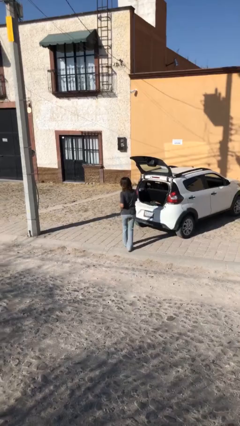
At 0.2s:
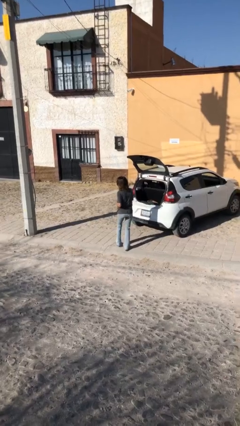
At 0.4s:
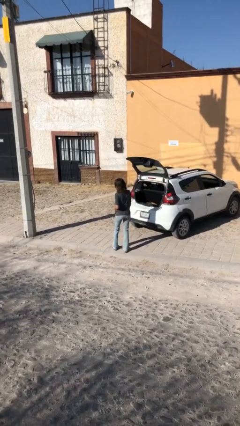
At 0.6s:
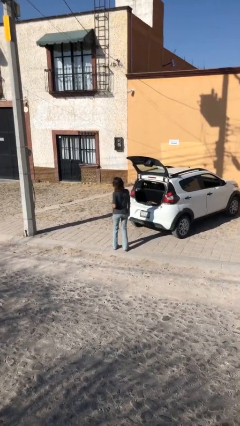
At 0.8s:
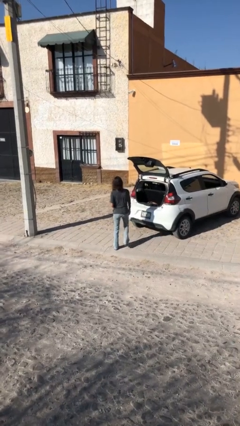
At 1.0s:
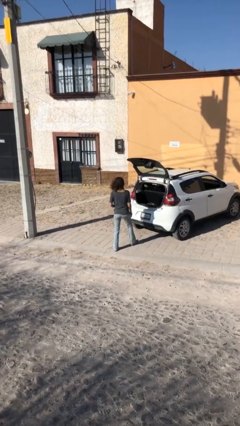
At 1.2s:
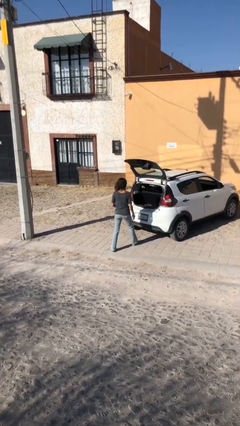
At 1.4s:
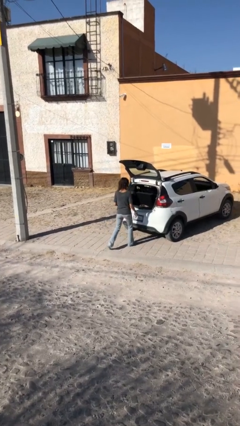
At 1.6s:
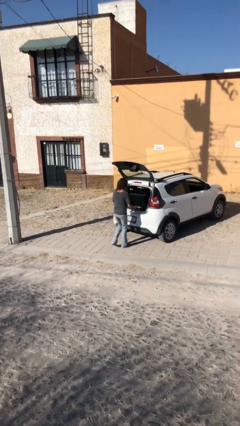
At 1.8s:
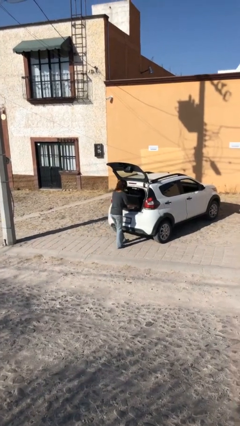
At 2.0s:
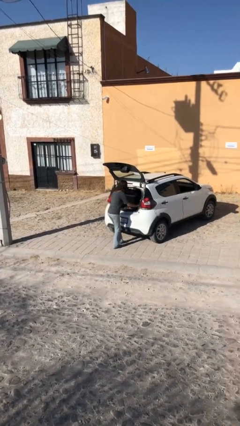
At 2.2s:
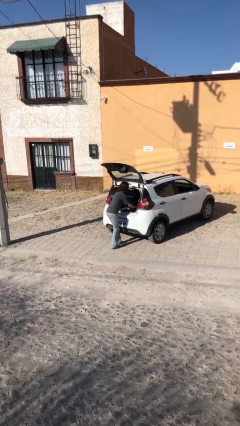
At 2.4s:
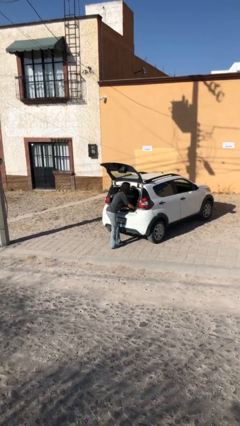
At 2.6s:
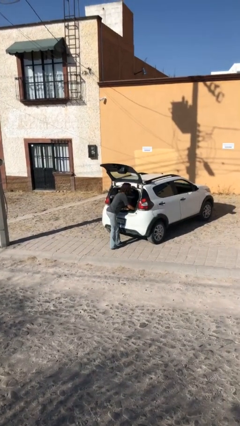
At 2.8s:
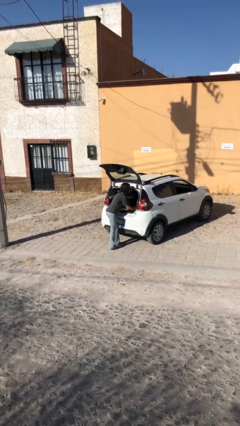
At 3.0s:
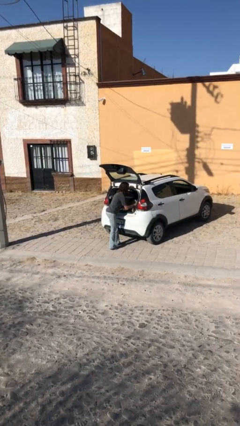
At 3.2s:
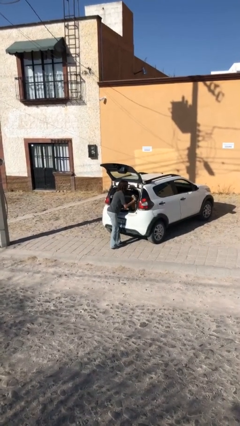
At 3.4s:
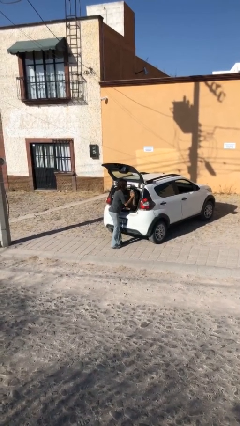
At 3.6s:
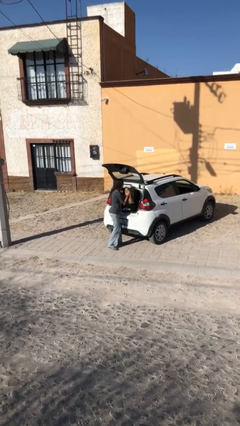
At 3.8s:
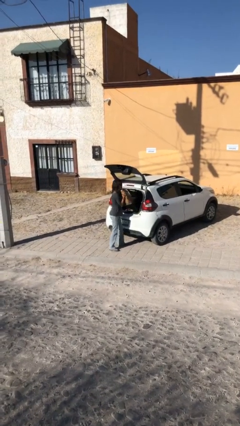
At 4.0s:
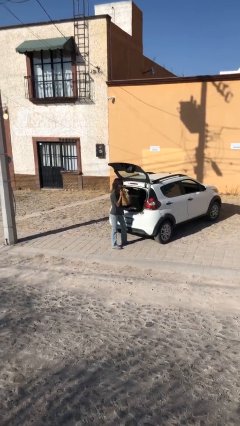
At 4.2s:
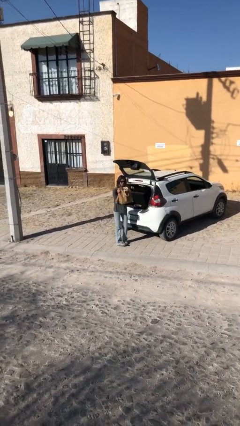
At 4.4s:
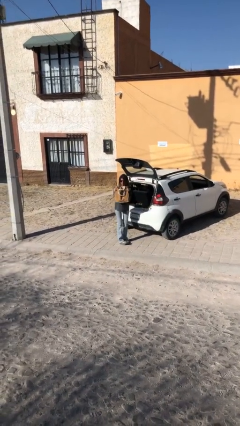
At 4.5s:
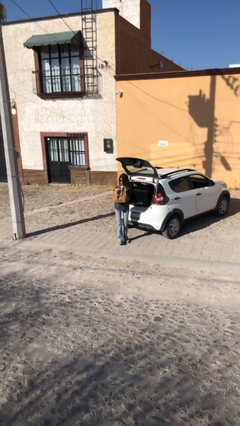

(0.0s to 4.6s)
person unloads car

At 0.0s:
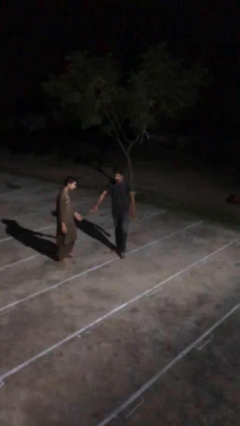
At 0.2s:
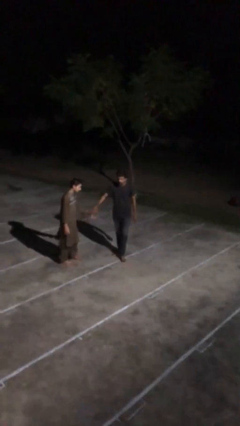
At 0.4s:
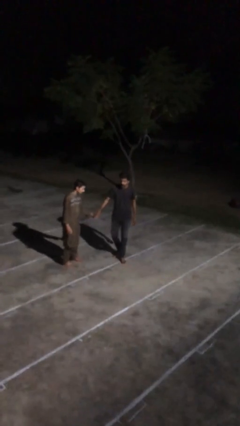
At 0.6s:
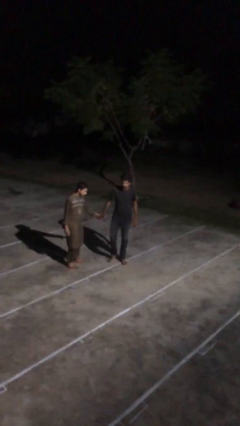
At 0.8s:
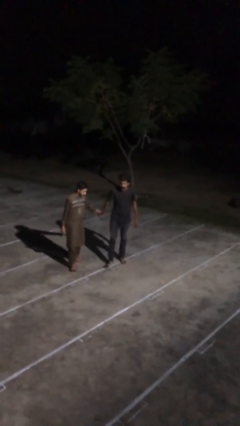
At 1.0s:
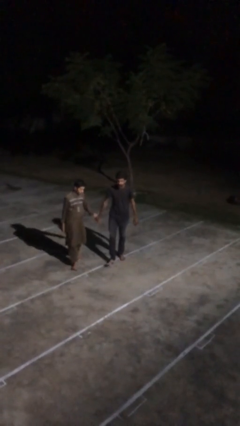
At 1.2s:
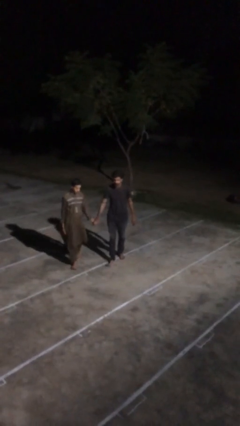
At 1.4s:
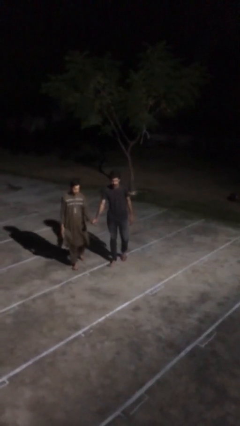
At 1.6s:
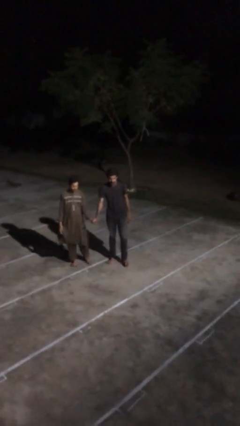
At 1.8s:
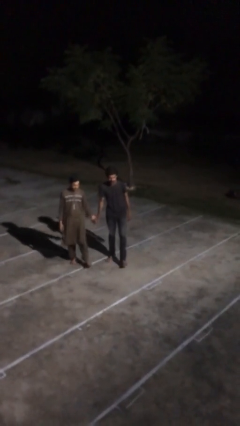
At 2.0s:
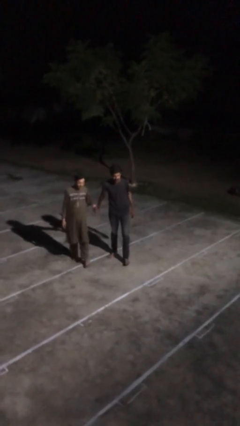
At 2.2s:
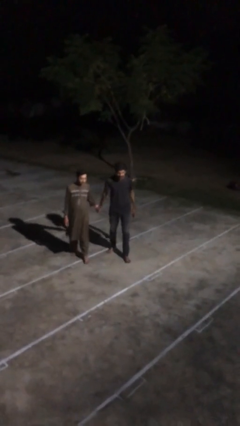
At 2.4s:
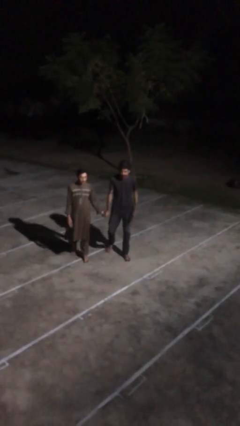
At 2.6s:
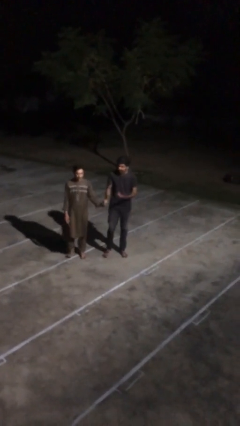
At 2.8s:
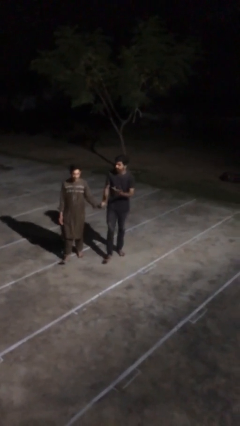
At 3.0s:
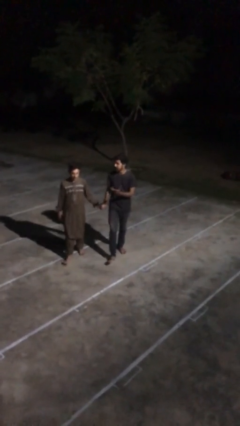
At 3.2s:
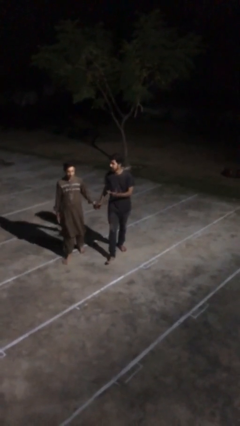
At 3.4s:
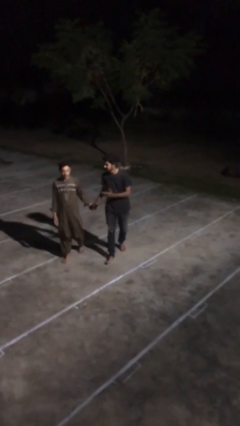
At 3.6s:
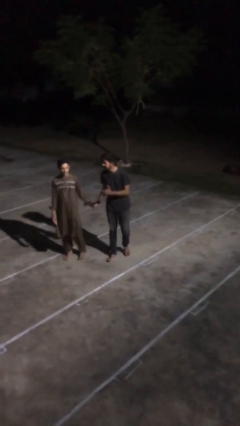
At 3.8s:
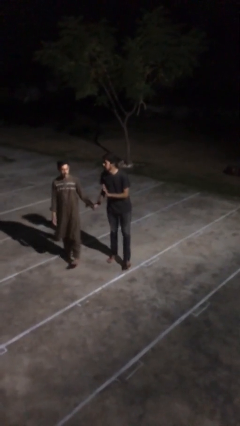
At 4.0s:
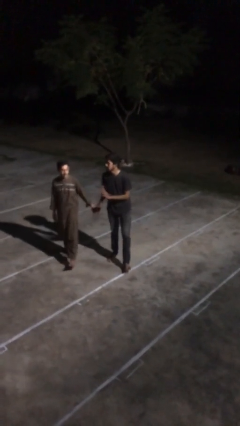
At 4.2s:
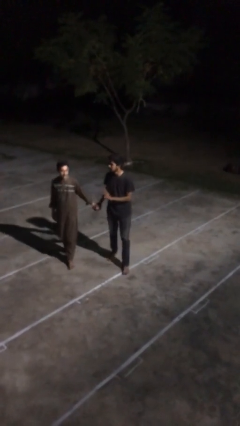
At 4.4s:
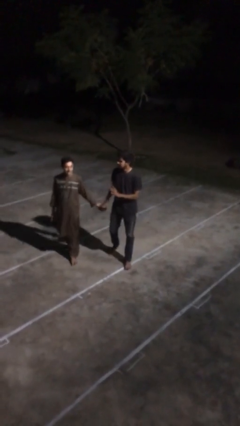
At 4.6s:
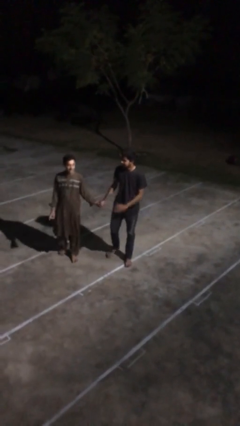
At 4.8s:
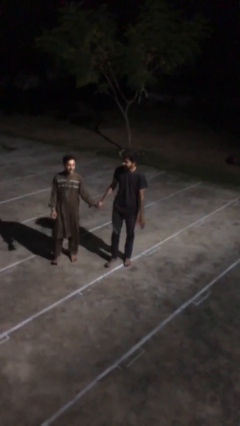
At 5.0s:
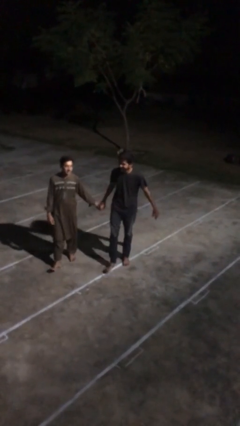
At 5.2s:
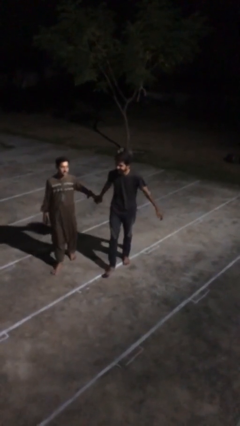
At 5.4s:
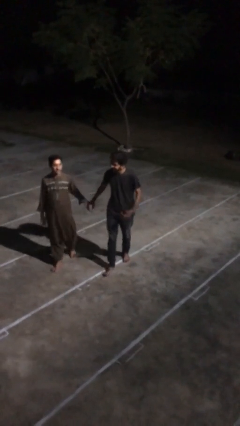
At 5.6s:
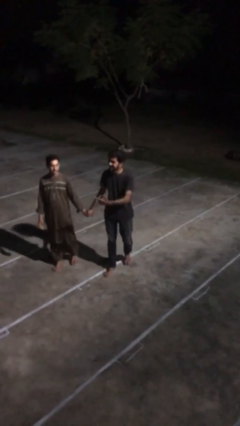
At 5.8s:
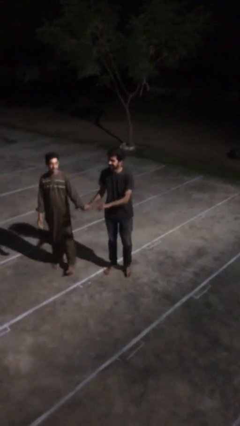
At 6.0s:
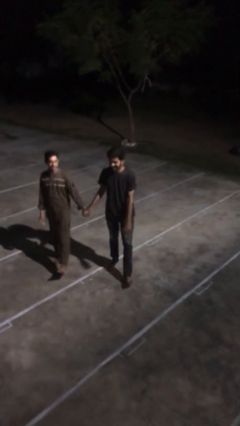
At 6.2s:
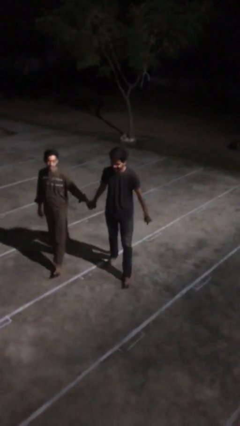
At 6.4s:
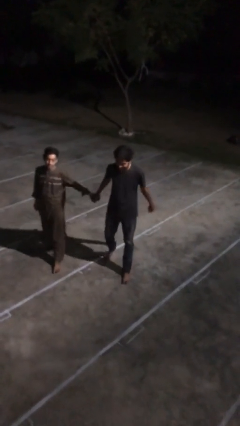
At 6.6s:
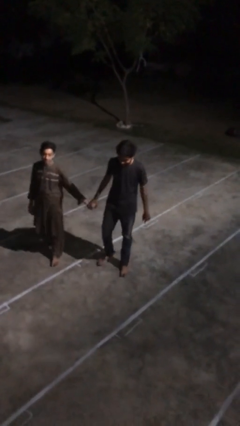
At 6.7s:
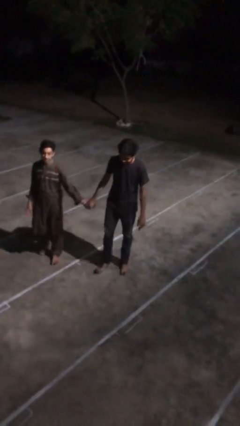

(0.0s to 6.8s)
person holds hand

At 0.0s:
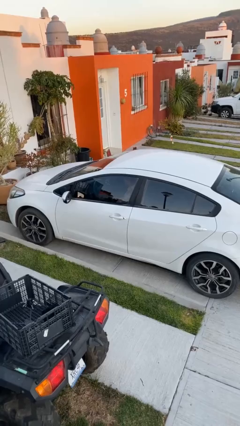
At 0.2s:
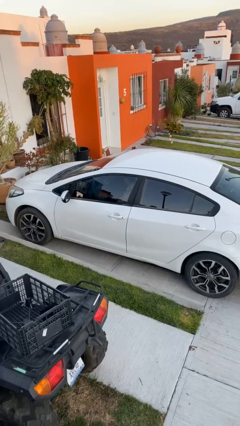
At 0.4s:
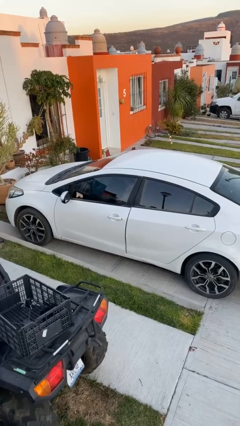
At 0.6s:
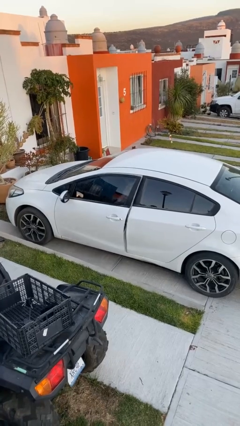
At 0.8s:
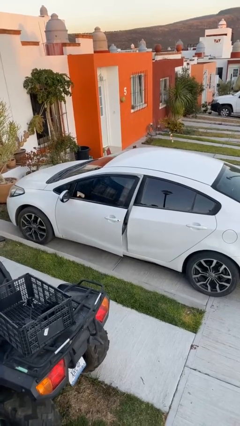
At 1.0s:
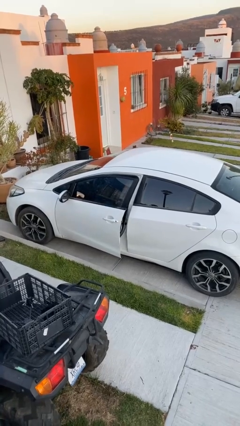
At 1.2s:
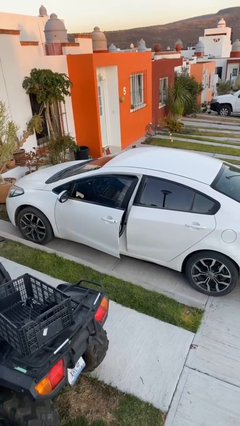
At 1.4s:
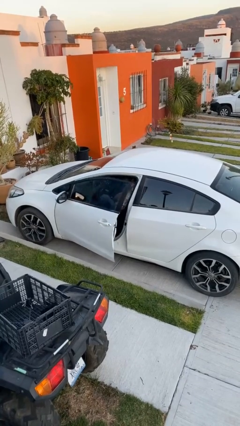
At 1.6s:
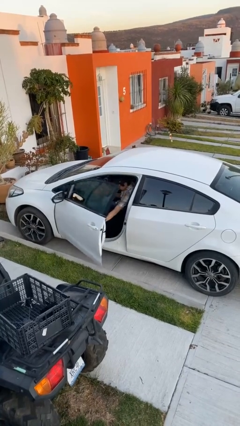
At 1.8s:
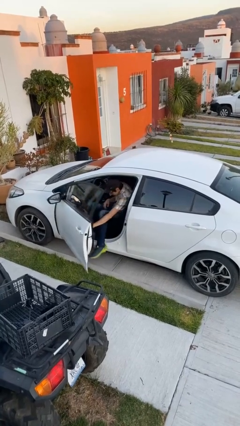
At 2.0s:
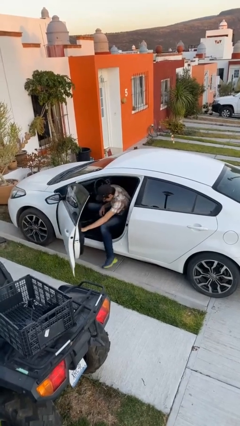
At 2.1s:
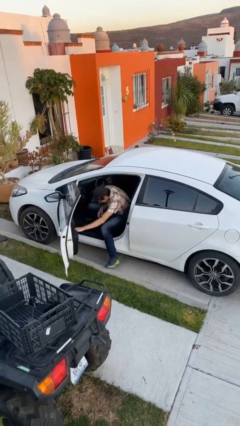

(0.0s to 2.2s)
person opens car door

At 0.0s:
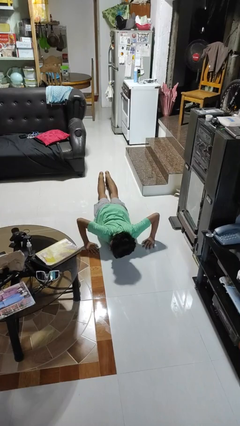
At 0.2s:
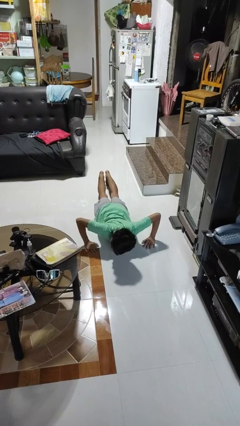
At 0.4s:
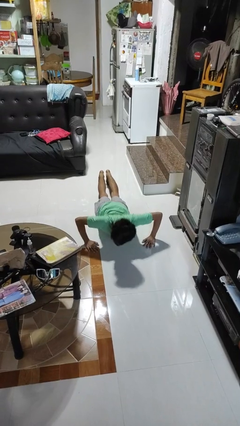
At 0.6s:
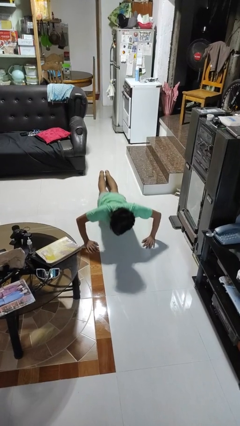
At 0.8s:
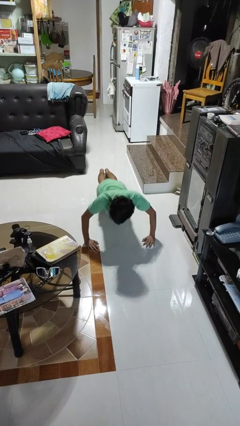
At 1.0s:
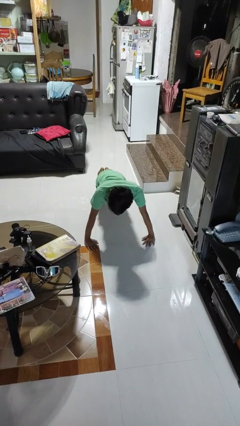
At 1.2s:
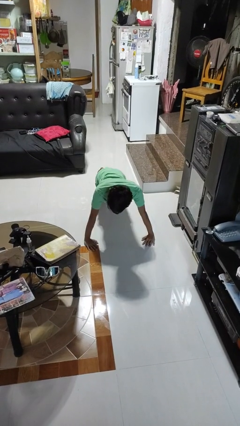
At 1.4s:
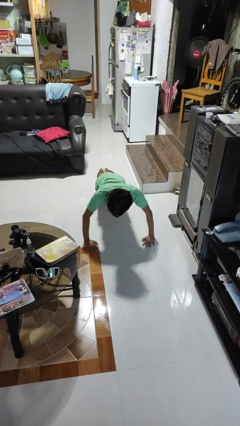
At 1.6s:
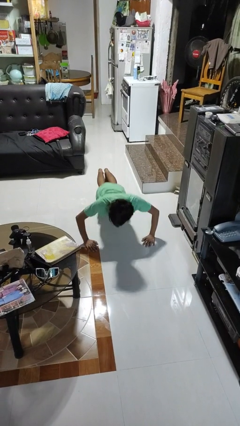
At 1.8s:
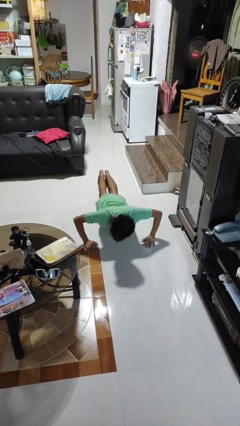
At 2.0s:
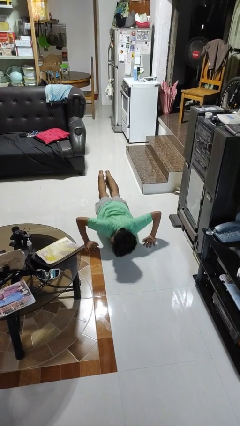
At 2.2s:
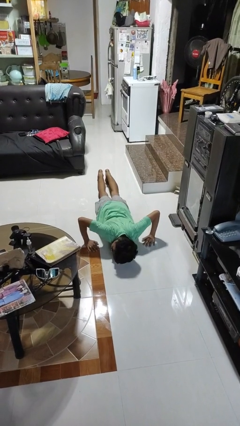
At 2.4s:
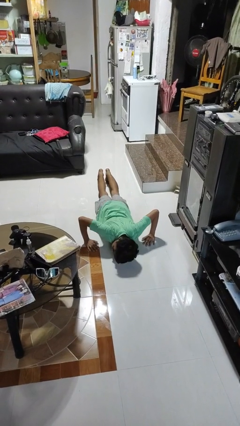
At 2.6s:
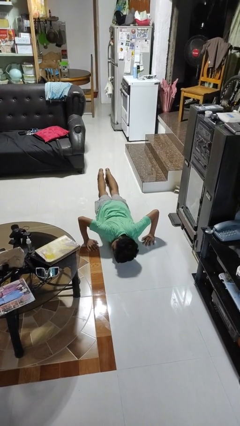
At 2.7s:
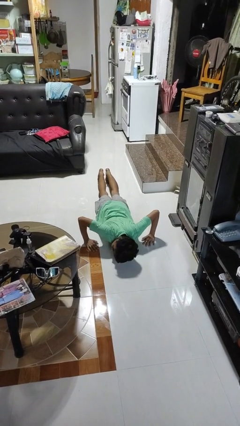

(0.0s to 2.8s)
person exercises with pushup

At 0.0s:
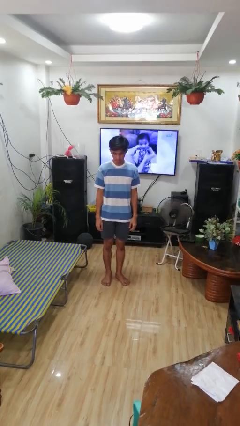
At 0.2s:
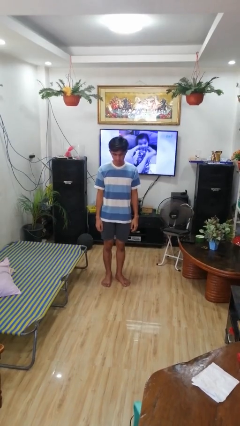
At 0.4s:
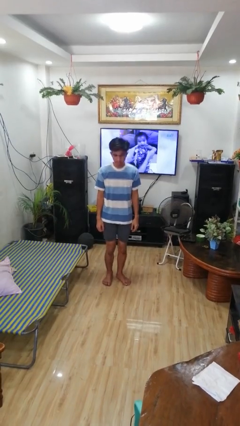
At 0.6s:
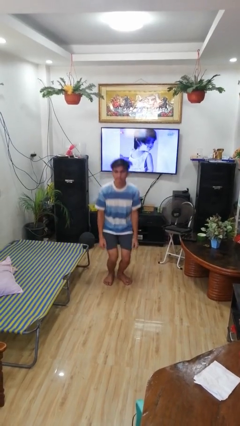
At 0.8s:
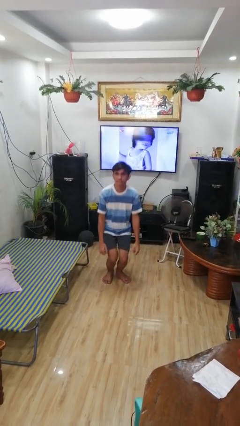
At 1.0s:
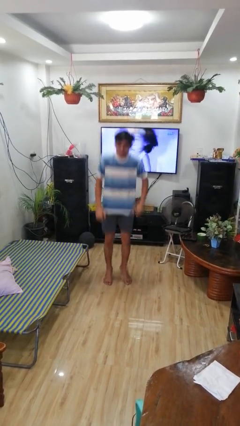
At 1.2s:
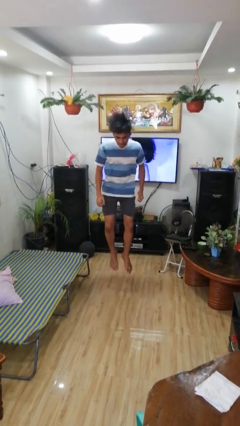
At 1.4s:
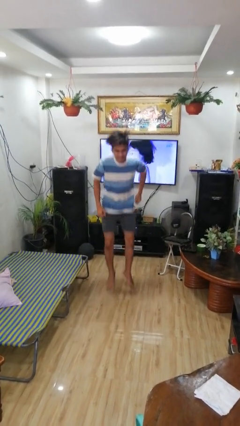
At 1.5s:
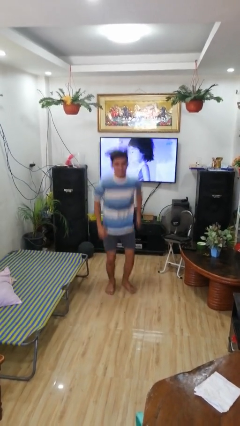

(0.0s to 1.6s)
person jumps
